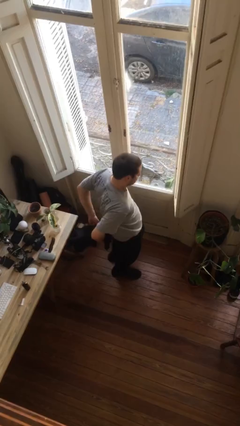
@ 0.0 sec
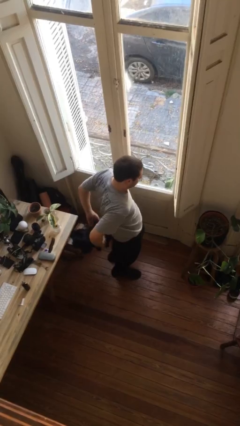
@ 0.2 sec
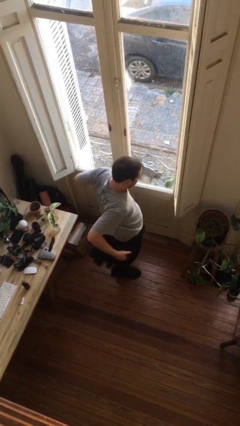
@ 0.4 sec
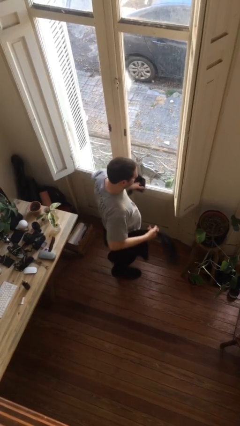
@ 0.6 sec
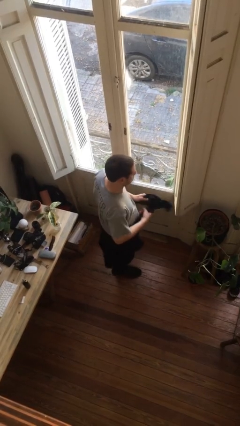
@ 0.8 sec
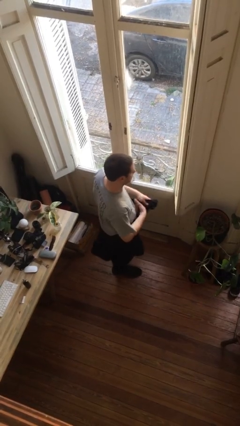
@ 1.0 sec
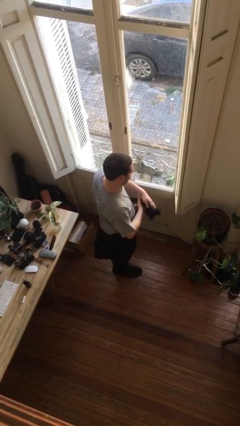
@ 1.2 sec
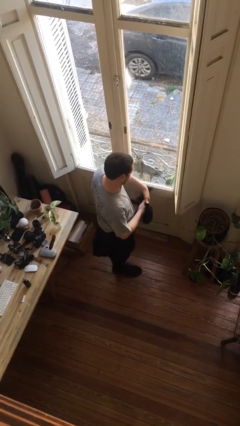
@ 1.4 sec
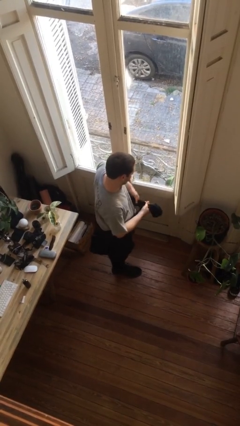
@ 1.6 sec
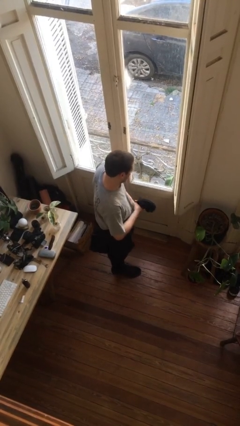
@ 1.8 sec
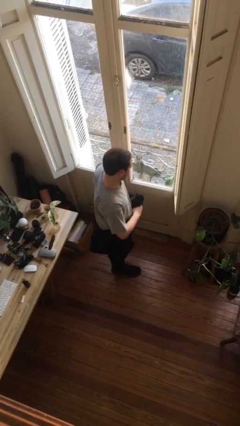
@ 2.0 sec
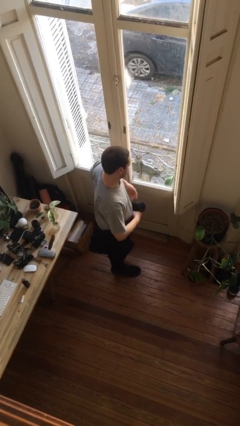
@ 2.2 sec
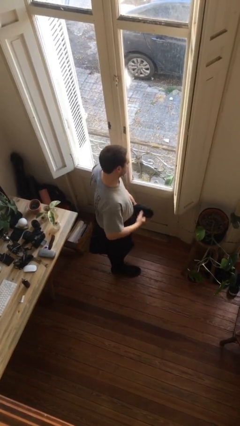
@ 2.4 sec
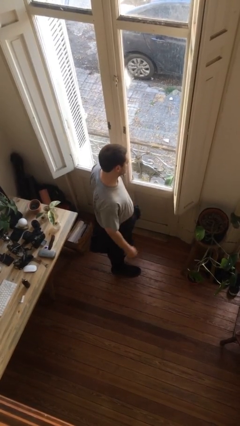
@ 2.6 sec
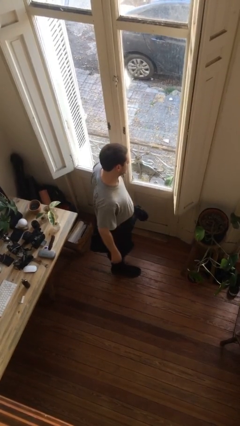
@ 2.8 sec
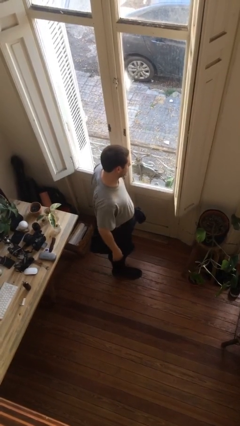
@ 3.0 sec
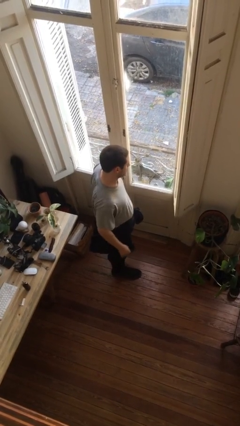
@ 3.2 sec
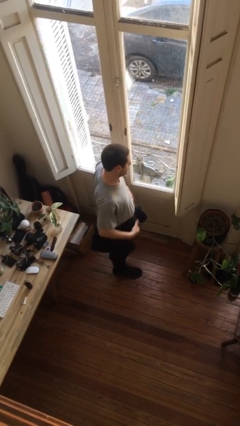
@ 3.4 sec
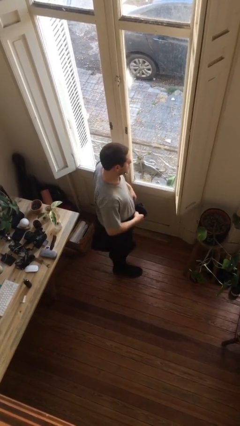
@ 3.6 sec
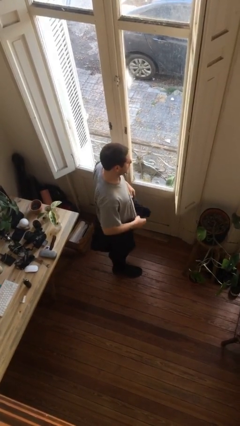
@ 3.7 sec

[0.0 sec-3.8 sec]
person ties jacket around waist

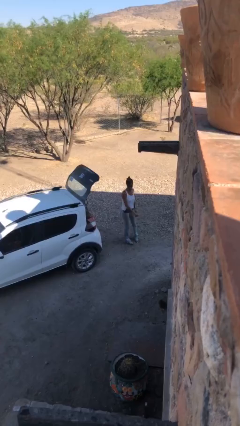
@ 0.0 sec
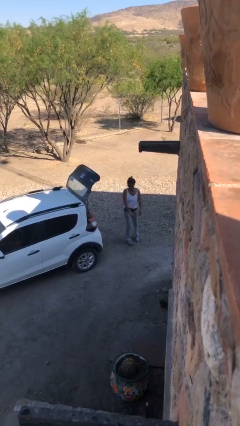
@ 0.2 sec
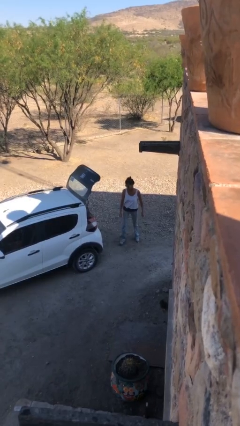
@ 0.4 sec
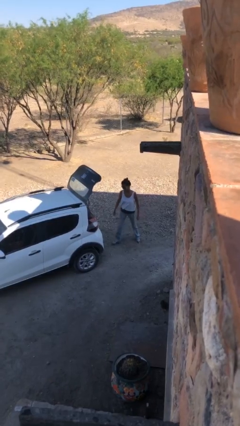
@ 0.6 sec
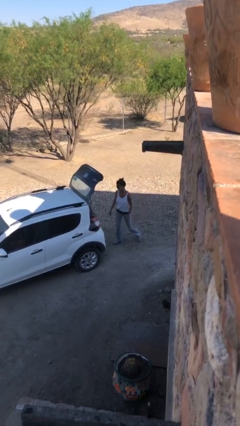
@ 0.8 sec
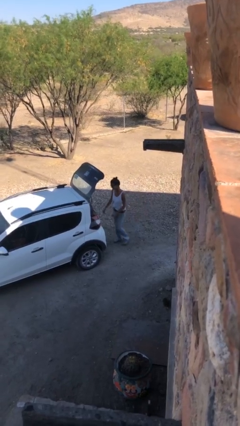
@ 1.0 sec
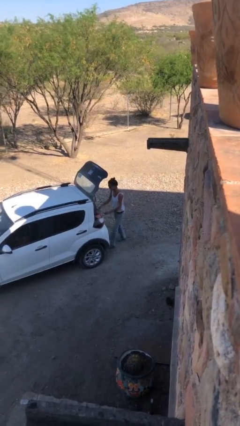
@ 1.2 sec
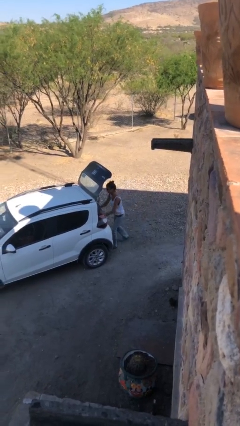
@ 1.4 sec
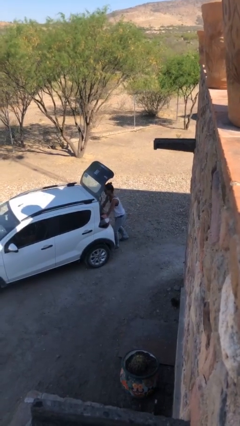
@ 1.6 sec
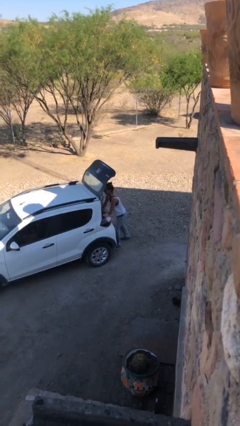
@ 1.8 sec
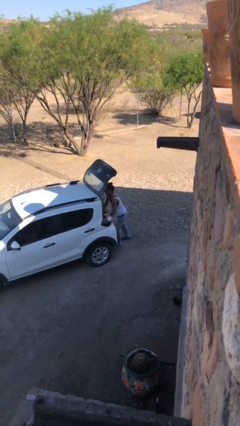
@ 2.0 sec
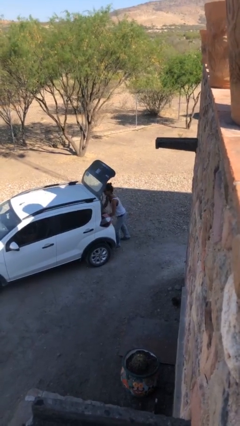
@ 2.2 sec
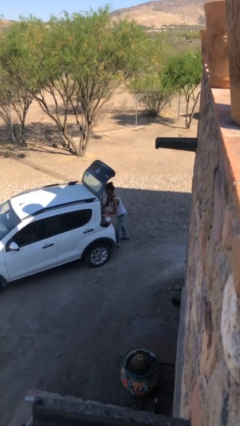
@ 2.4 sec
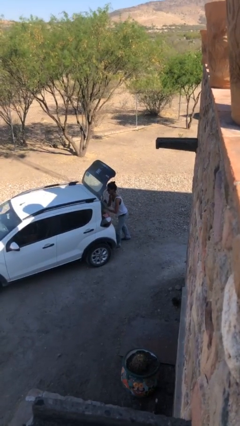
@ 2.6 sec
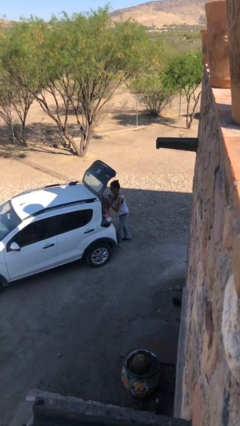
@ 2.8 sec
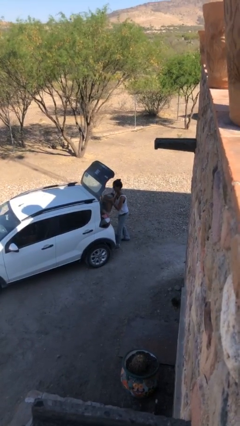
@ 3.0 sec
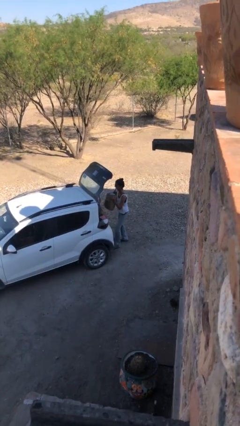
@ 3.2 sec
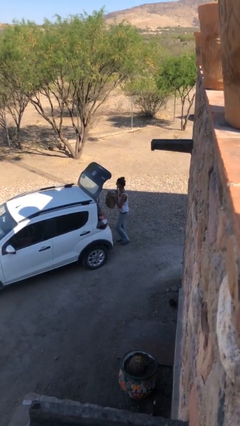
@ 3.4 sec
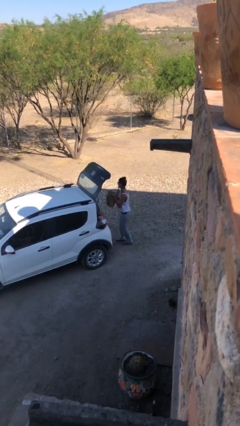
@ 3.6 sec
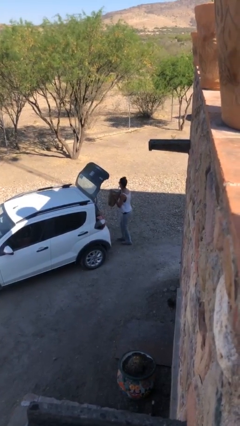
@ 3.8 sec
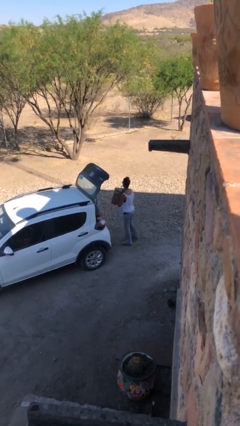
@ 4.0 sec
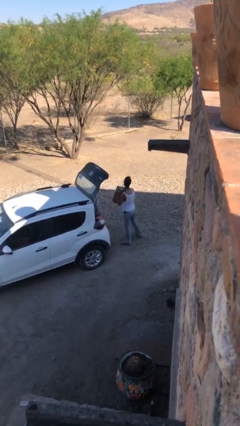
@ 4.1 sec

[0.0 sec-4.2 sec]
person unloads car

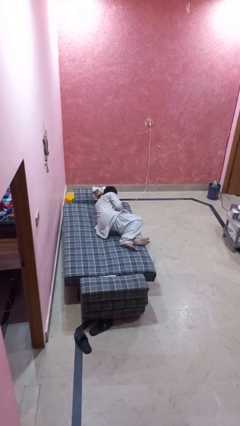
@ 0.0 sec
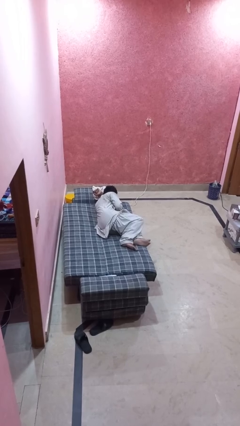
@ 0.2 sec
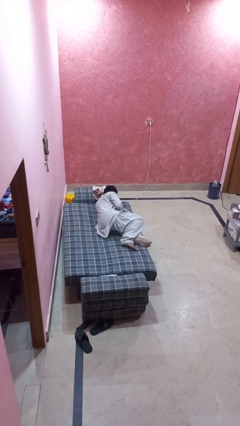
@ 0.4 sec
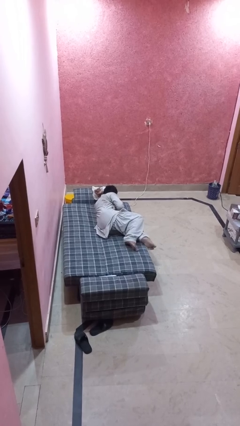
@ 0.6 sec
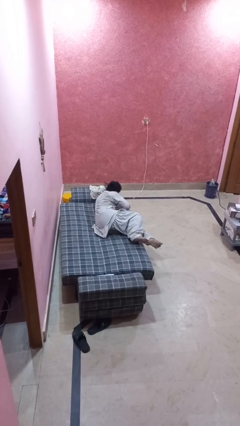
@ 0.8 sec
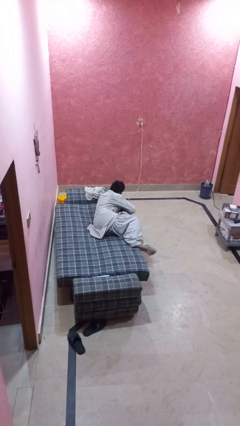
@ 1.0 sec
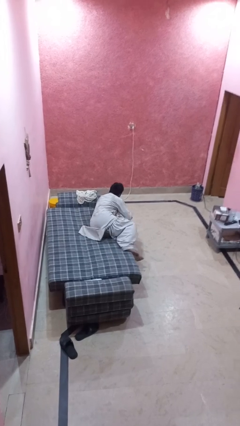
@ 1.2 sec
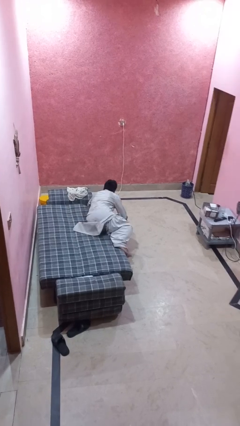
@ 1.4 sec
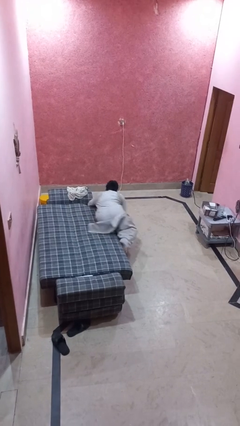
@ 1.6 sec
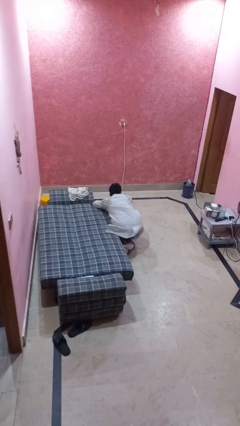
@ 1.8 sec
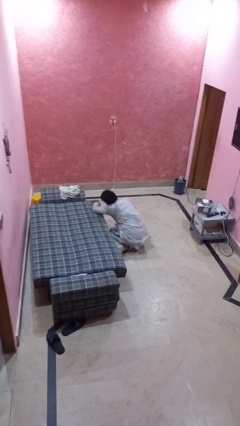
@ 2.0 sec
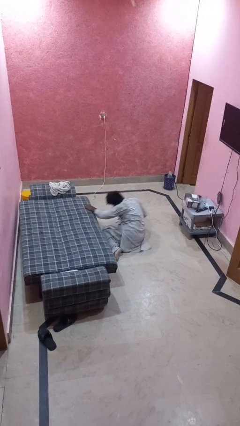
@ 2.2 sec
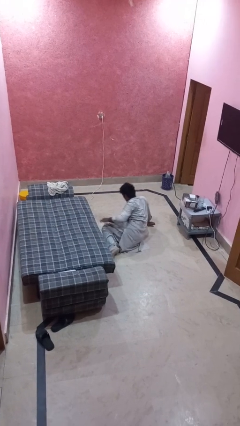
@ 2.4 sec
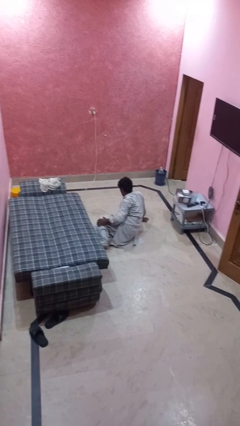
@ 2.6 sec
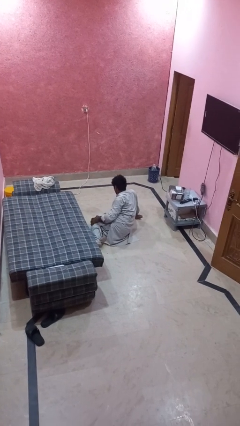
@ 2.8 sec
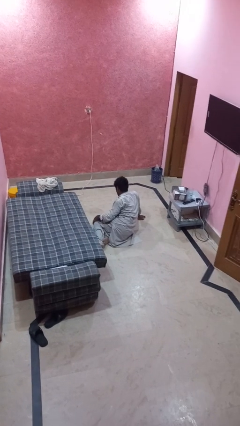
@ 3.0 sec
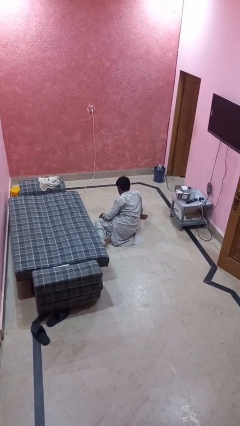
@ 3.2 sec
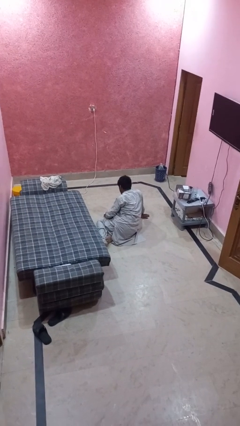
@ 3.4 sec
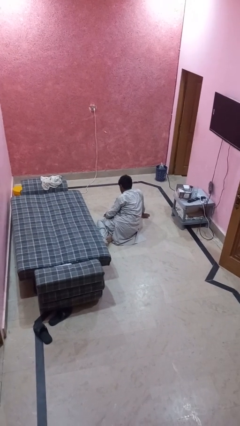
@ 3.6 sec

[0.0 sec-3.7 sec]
person falls from bed

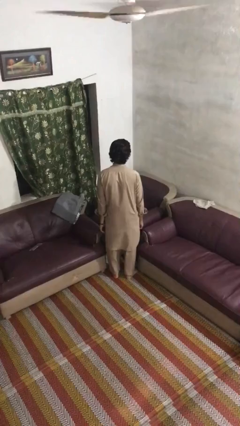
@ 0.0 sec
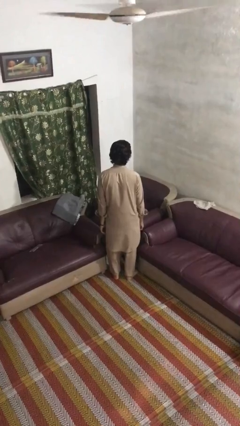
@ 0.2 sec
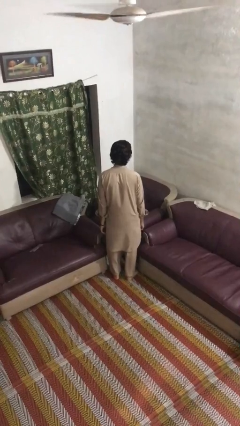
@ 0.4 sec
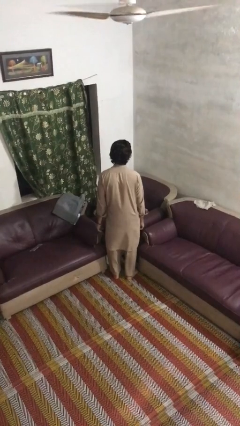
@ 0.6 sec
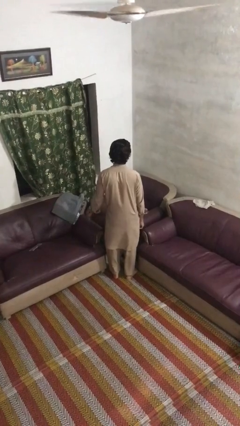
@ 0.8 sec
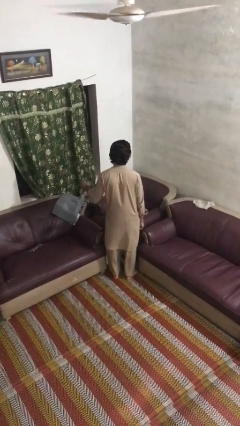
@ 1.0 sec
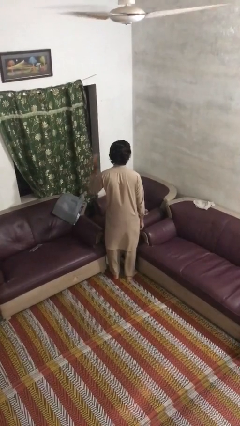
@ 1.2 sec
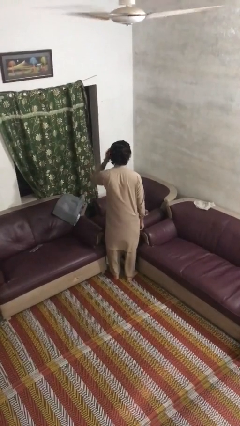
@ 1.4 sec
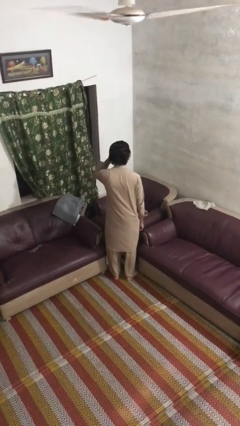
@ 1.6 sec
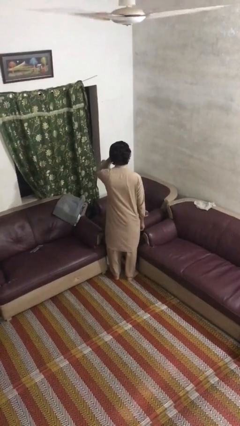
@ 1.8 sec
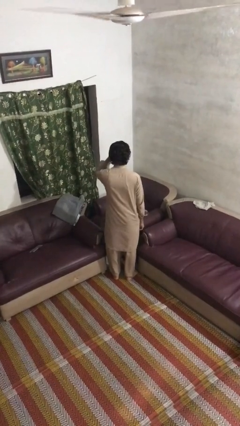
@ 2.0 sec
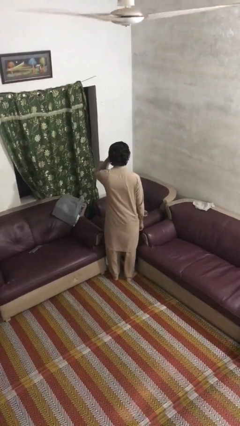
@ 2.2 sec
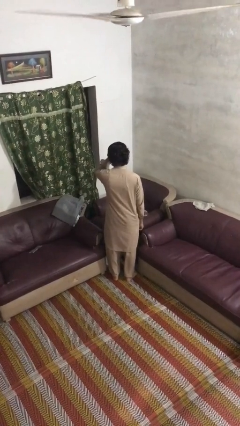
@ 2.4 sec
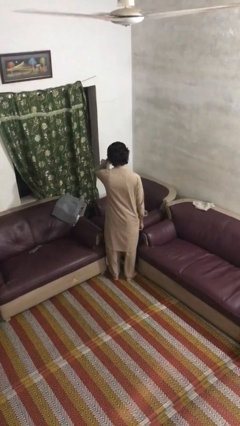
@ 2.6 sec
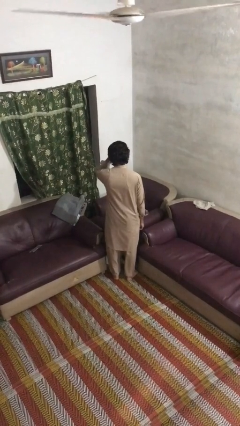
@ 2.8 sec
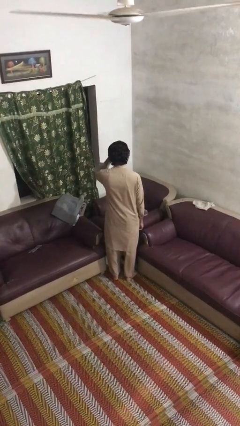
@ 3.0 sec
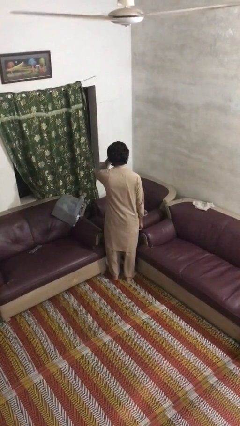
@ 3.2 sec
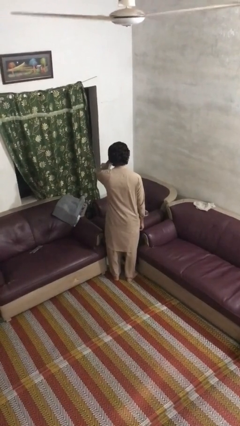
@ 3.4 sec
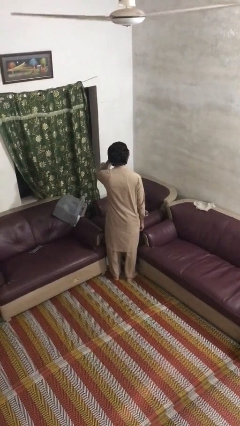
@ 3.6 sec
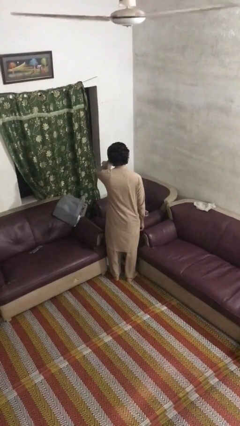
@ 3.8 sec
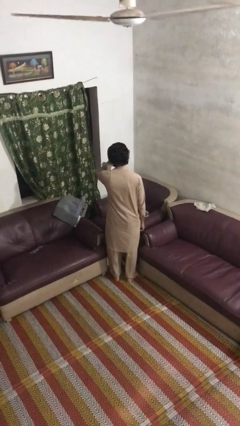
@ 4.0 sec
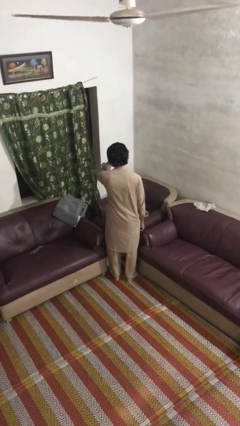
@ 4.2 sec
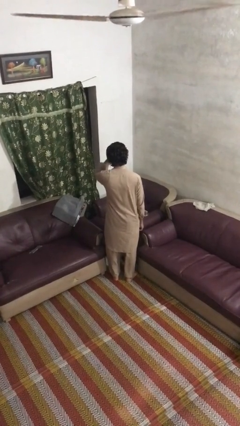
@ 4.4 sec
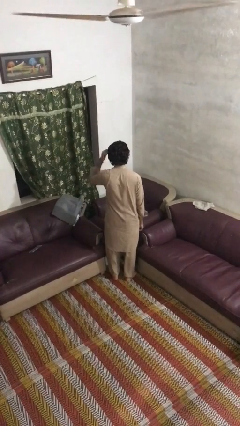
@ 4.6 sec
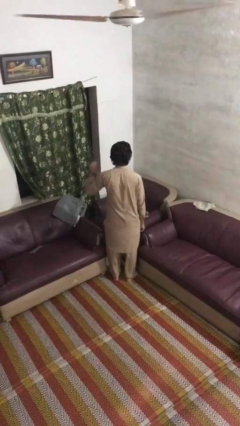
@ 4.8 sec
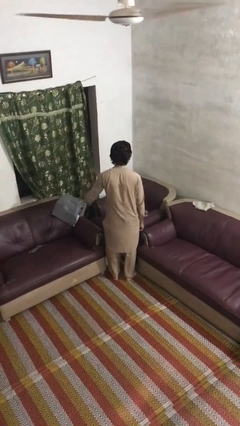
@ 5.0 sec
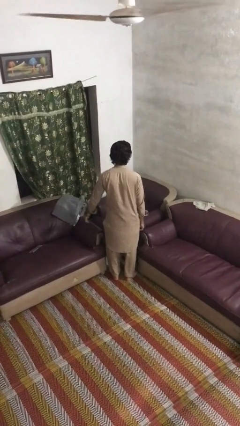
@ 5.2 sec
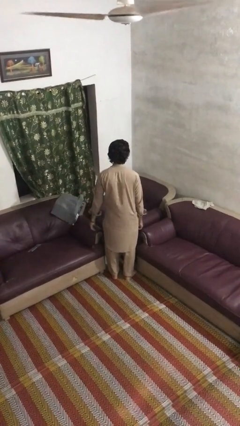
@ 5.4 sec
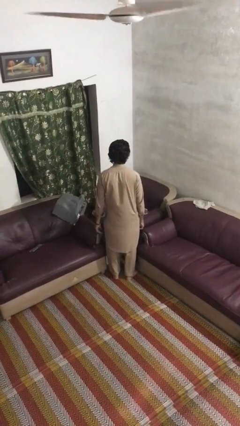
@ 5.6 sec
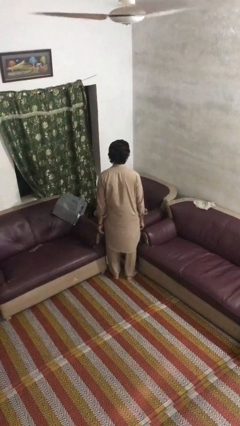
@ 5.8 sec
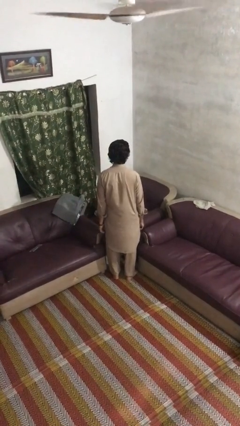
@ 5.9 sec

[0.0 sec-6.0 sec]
person scratches face
